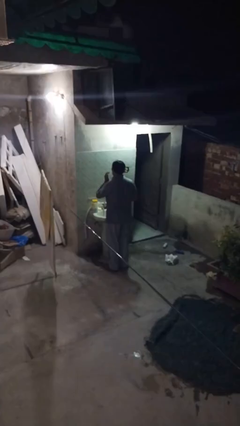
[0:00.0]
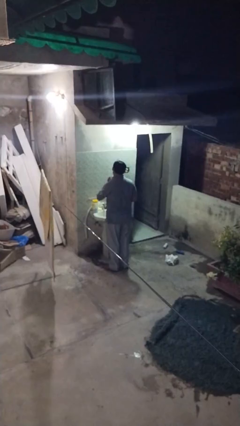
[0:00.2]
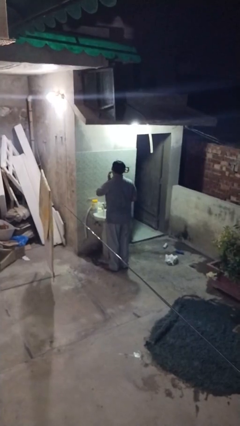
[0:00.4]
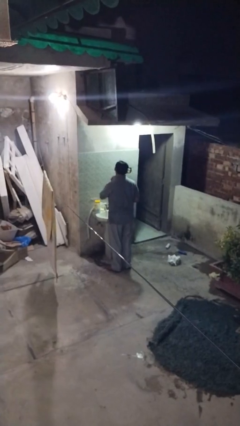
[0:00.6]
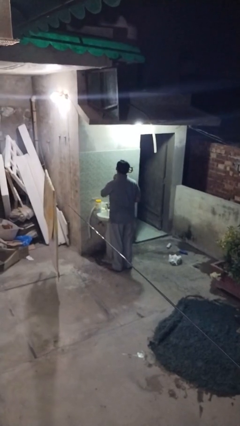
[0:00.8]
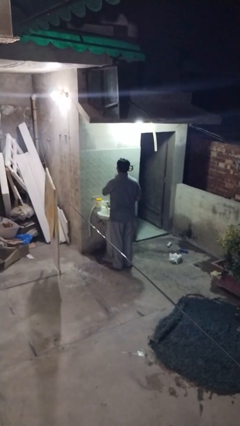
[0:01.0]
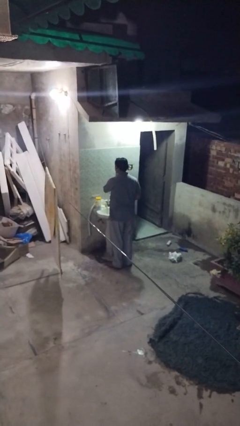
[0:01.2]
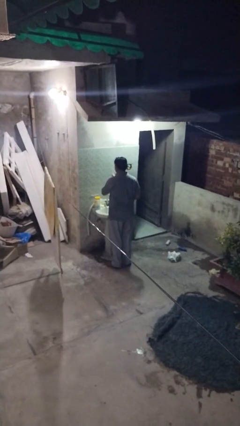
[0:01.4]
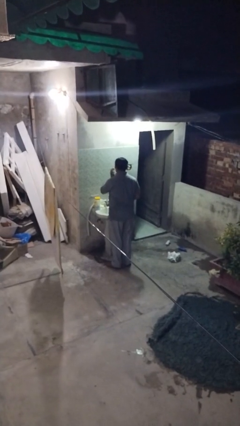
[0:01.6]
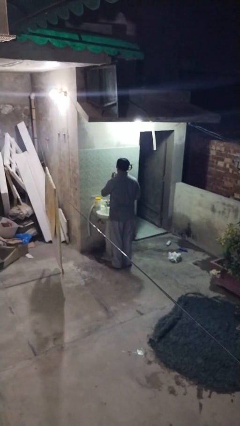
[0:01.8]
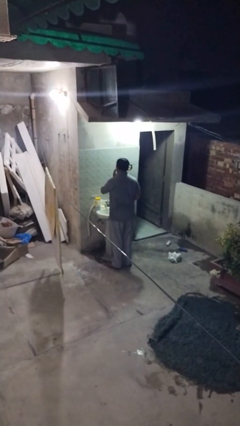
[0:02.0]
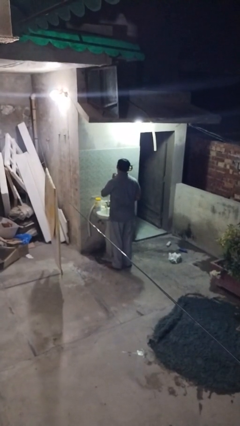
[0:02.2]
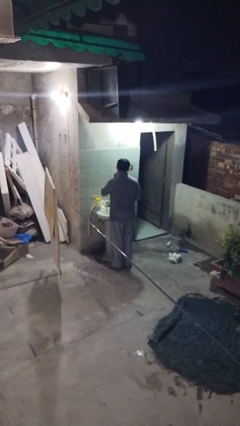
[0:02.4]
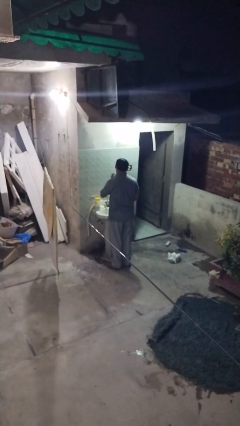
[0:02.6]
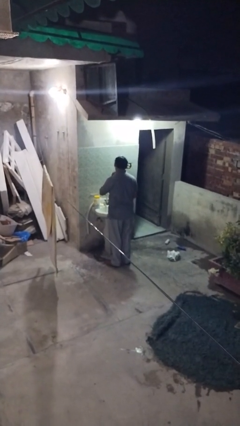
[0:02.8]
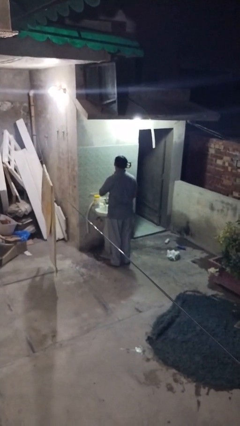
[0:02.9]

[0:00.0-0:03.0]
person applies shaving cream

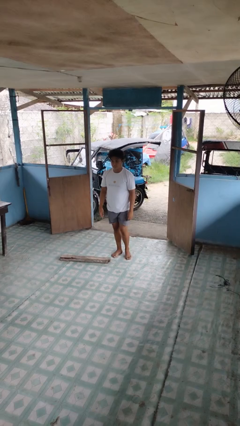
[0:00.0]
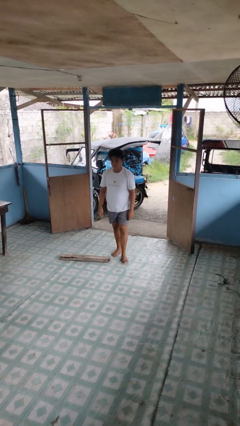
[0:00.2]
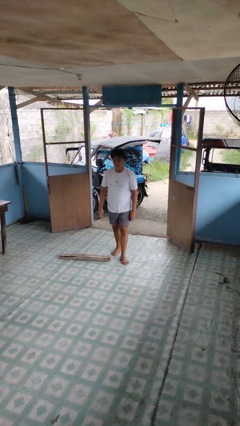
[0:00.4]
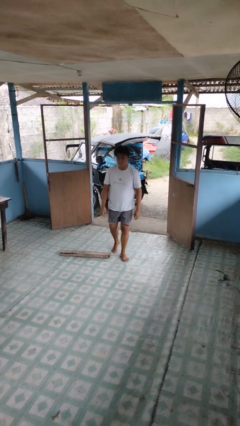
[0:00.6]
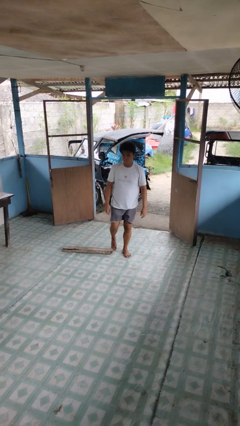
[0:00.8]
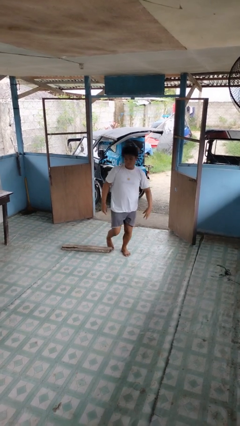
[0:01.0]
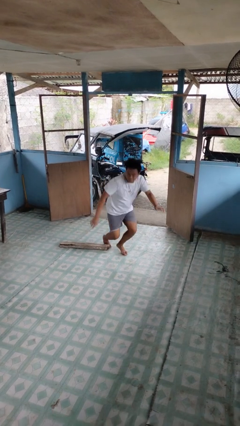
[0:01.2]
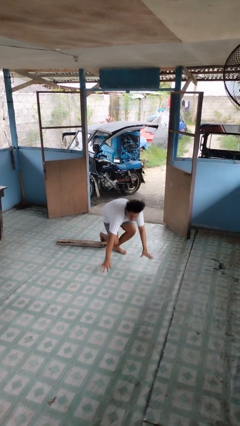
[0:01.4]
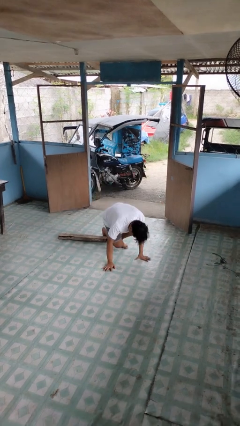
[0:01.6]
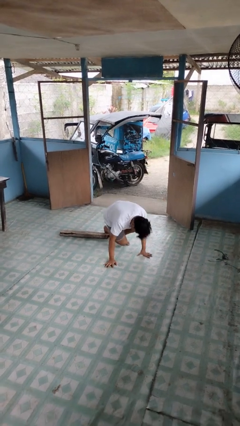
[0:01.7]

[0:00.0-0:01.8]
person trips on object on floor

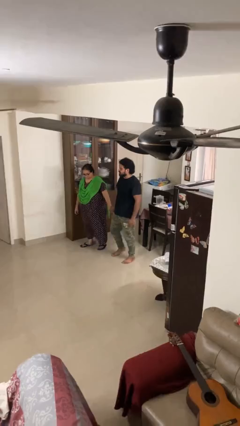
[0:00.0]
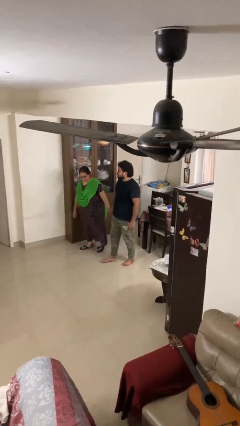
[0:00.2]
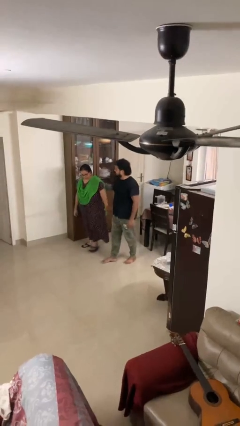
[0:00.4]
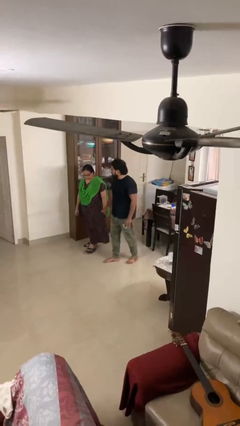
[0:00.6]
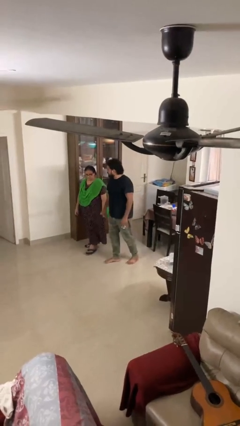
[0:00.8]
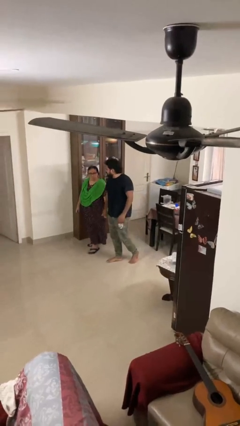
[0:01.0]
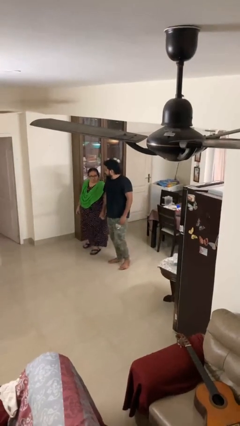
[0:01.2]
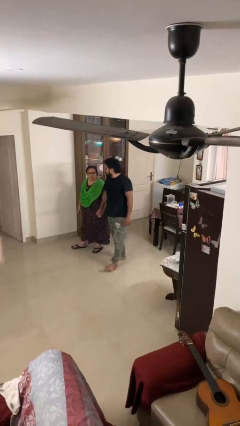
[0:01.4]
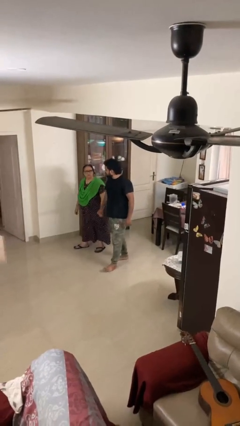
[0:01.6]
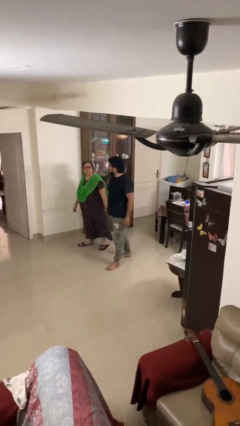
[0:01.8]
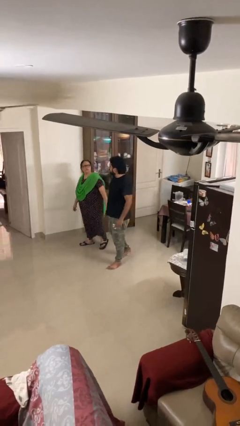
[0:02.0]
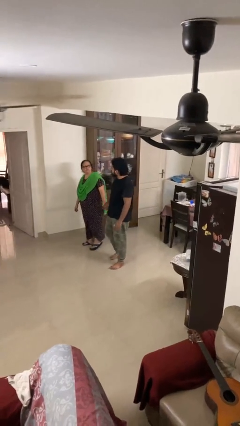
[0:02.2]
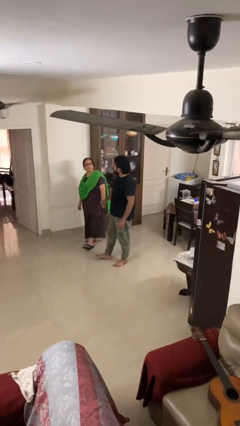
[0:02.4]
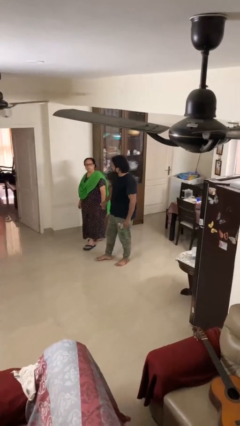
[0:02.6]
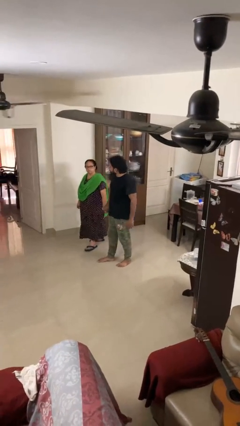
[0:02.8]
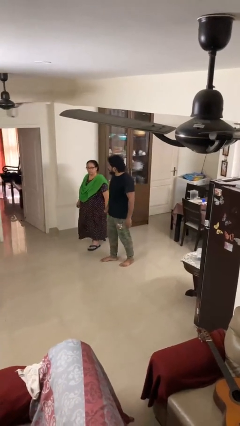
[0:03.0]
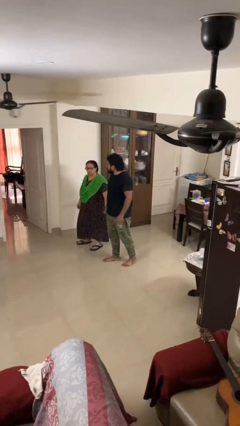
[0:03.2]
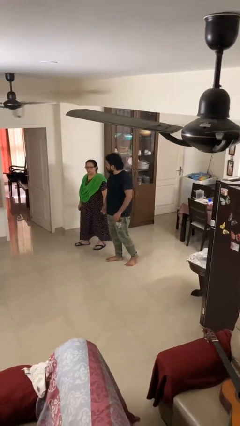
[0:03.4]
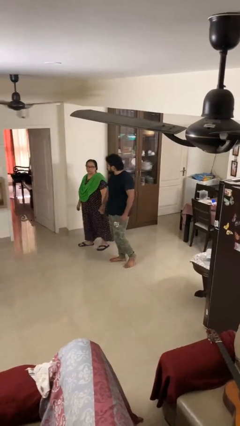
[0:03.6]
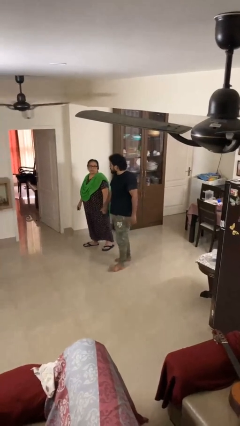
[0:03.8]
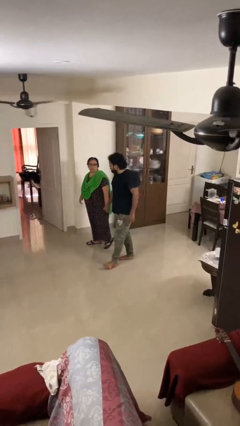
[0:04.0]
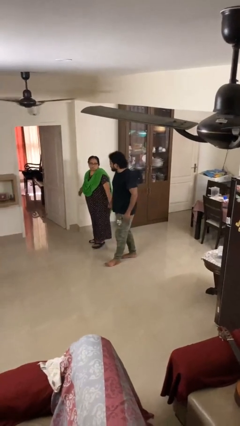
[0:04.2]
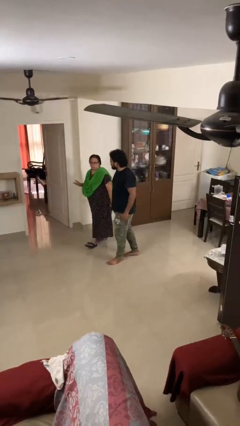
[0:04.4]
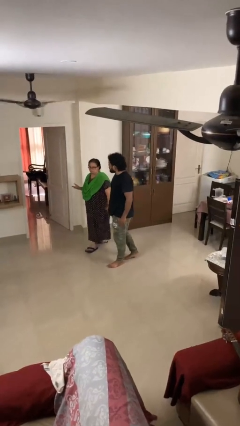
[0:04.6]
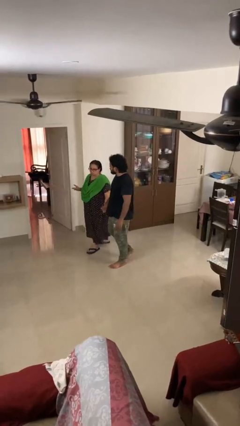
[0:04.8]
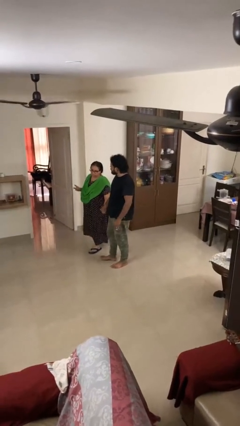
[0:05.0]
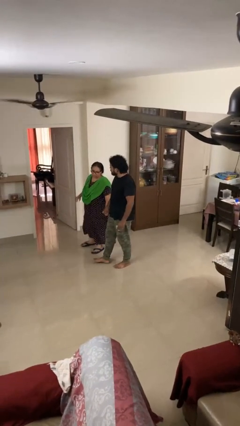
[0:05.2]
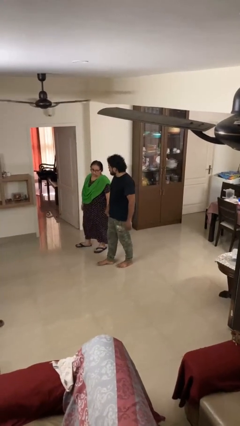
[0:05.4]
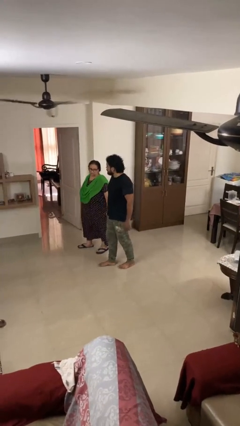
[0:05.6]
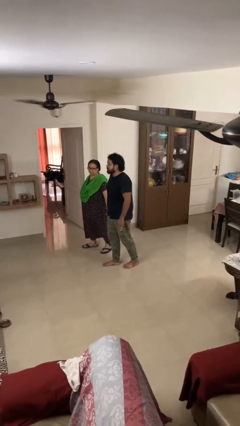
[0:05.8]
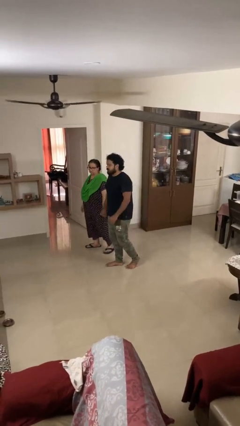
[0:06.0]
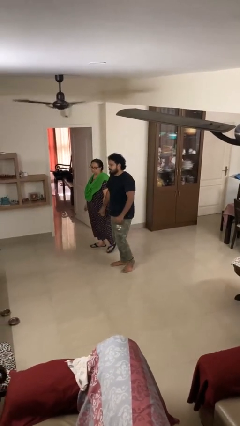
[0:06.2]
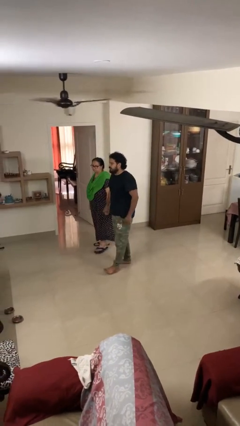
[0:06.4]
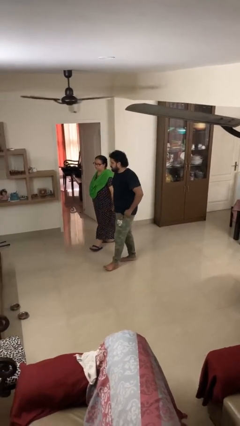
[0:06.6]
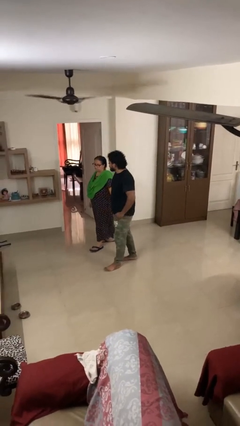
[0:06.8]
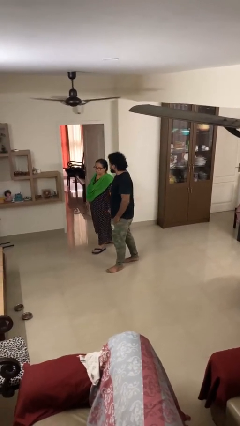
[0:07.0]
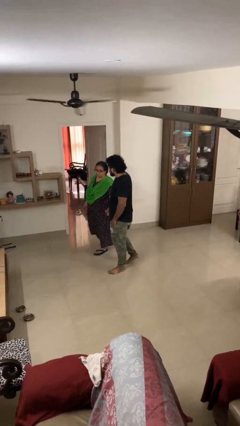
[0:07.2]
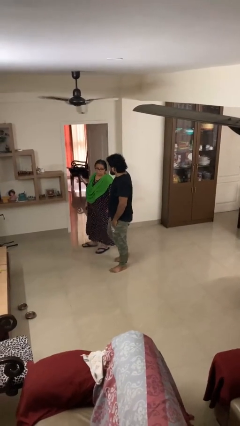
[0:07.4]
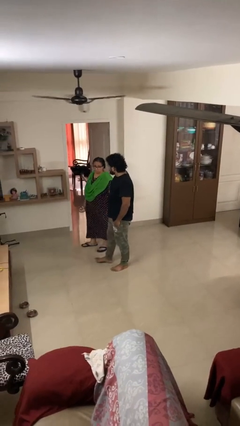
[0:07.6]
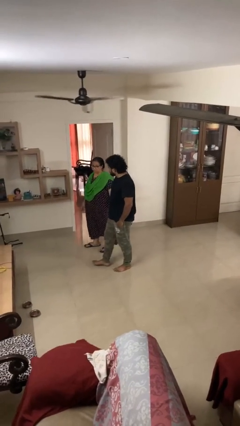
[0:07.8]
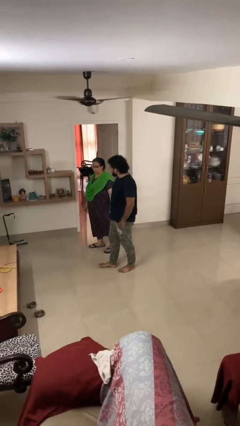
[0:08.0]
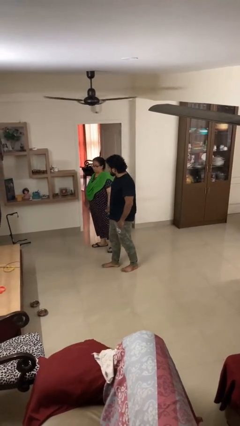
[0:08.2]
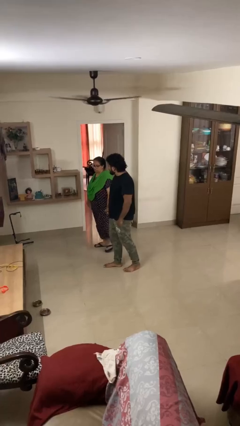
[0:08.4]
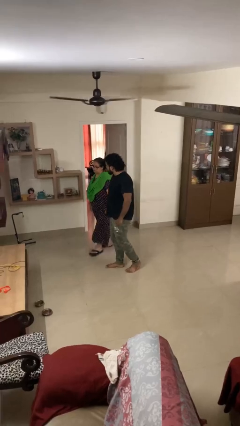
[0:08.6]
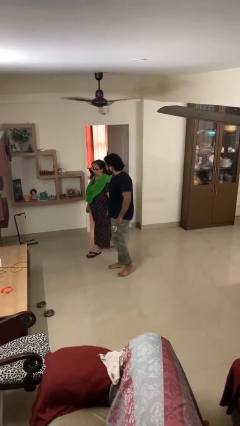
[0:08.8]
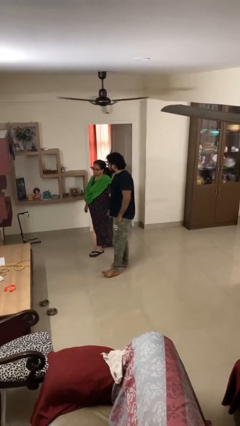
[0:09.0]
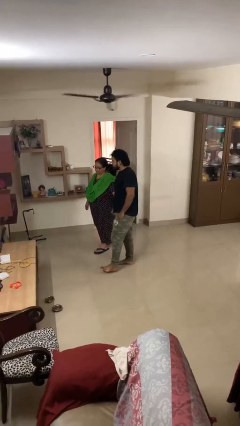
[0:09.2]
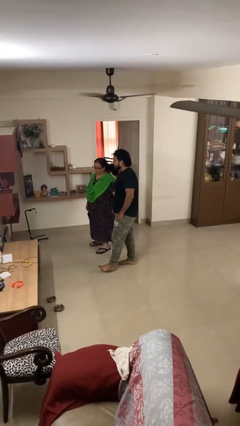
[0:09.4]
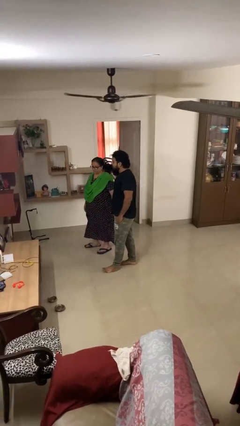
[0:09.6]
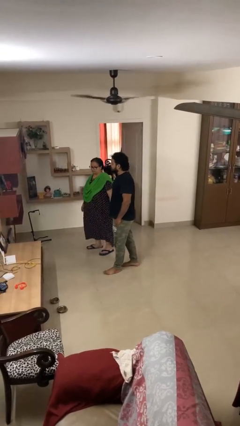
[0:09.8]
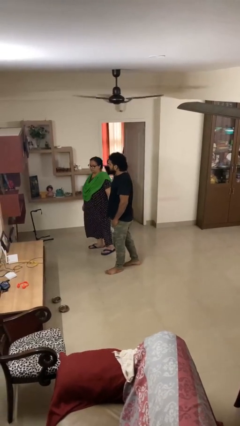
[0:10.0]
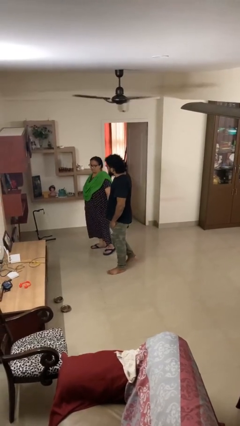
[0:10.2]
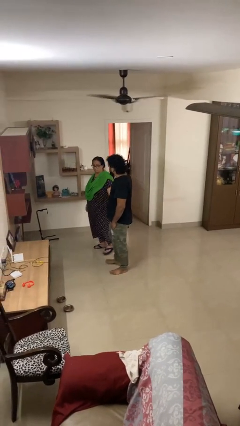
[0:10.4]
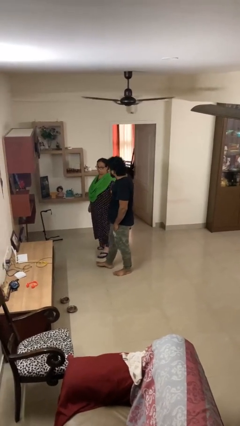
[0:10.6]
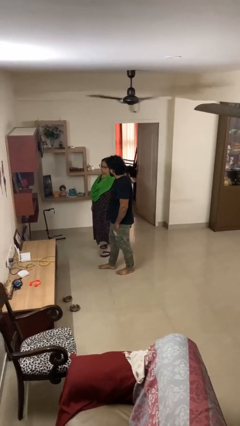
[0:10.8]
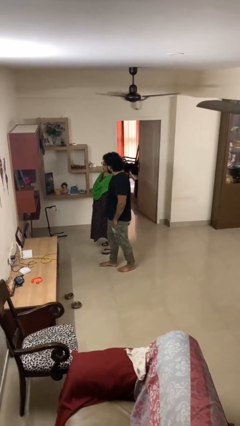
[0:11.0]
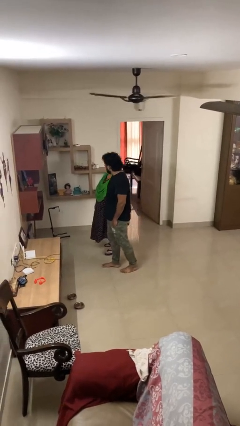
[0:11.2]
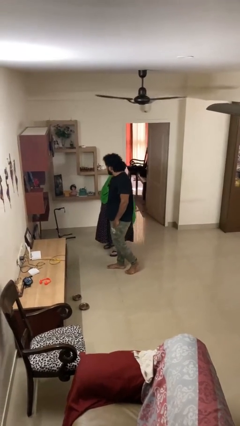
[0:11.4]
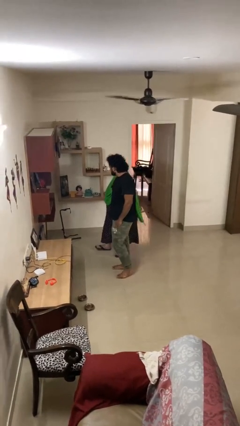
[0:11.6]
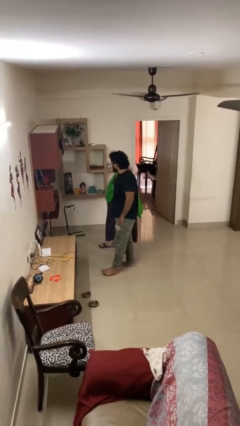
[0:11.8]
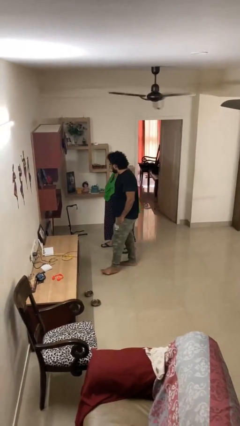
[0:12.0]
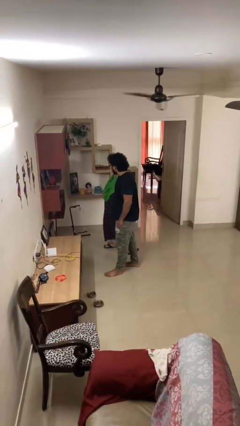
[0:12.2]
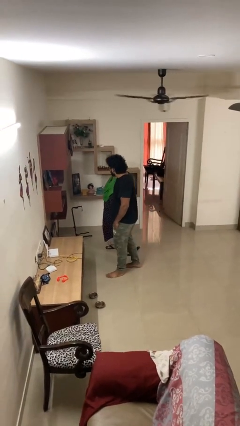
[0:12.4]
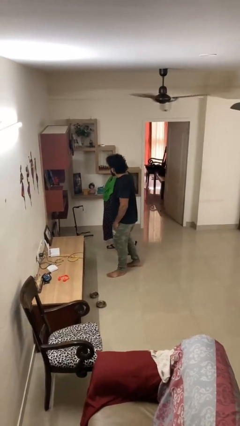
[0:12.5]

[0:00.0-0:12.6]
person holds hand

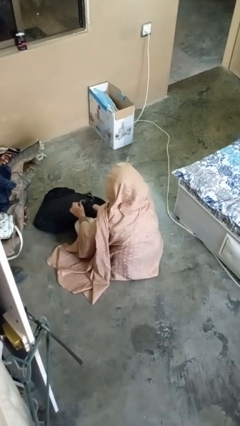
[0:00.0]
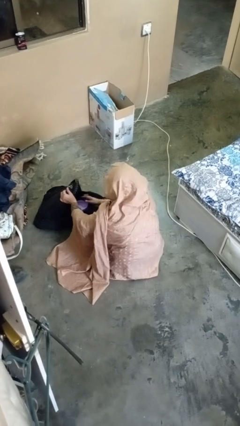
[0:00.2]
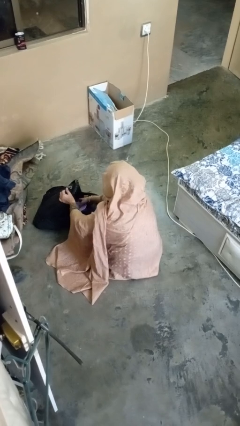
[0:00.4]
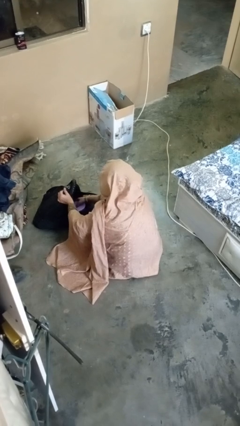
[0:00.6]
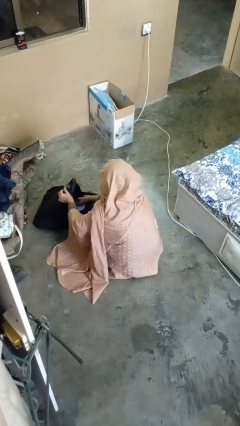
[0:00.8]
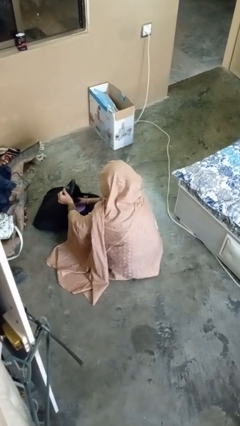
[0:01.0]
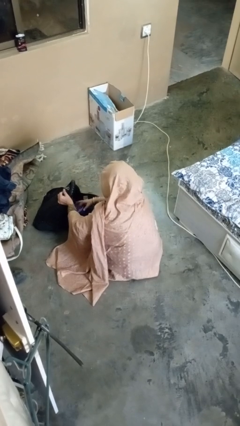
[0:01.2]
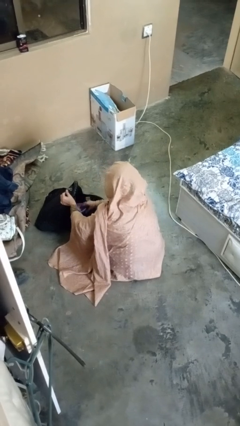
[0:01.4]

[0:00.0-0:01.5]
person searches in backpack
